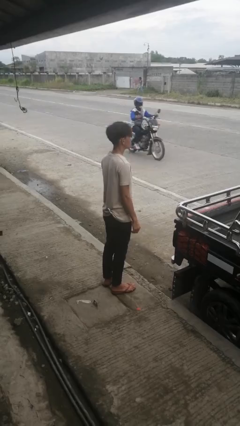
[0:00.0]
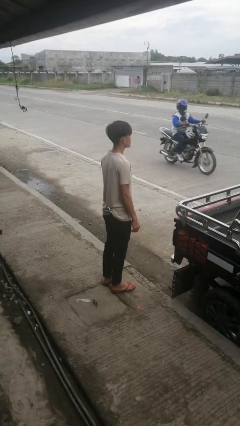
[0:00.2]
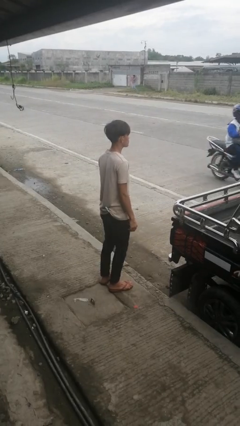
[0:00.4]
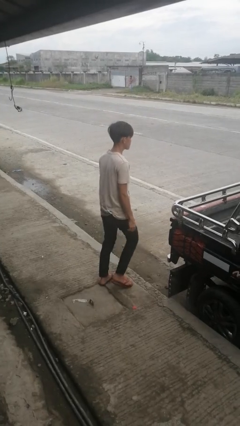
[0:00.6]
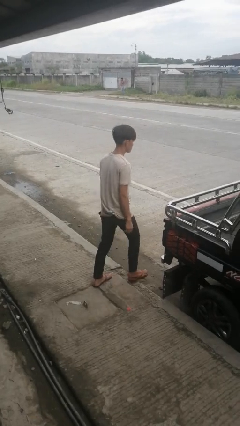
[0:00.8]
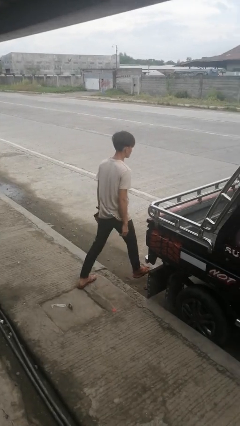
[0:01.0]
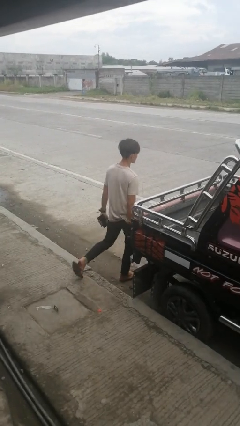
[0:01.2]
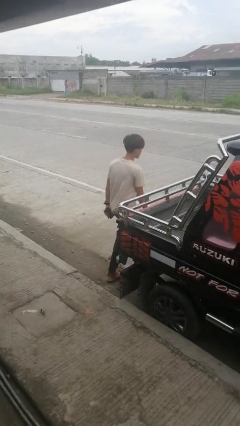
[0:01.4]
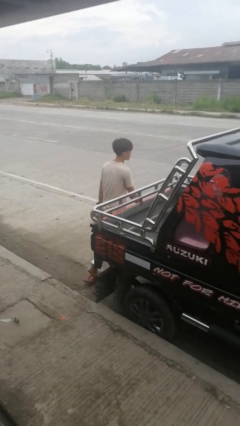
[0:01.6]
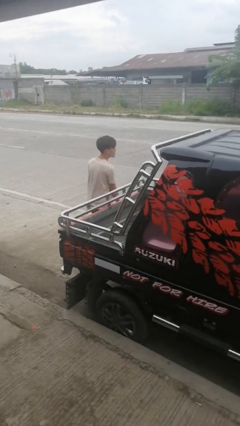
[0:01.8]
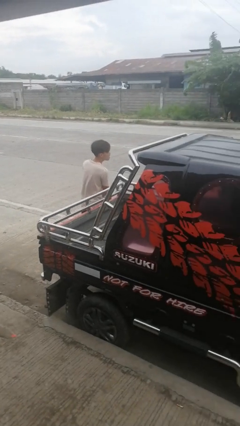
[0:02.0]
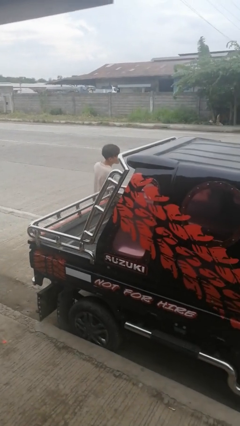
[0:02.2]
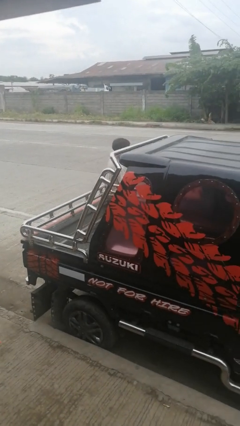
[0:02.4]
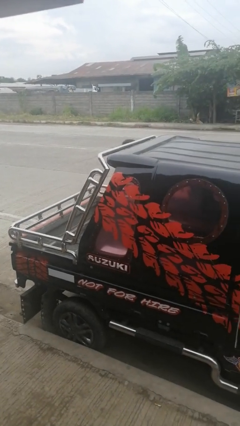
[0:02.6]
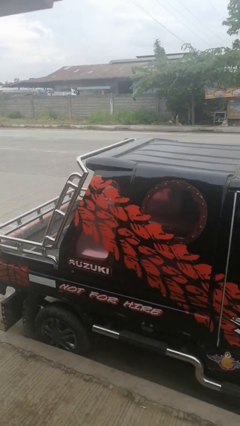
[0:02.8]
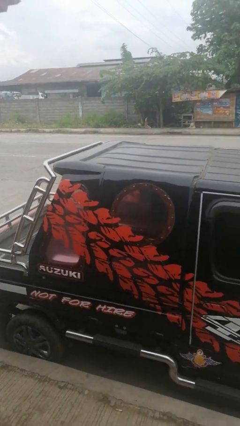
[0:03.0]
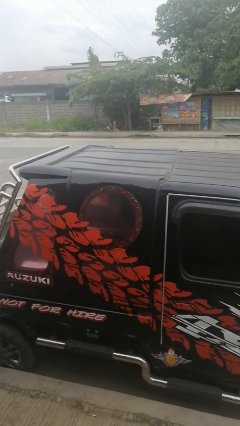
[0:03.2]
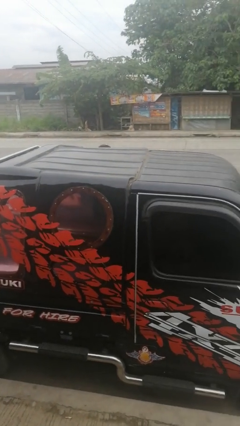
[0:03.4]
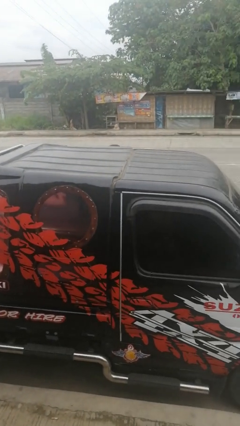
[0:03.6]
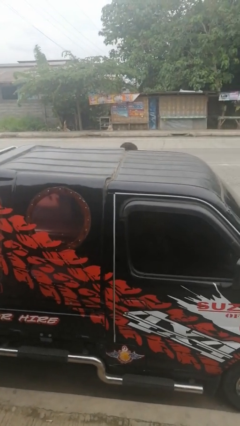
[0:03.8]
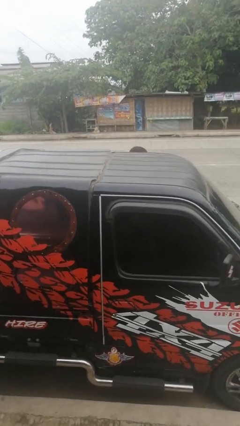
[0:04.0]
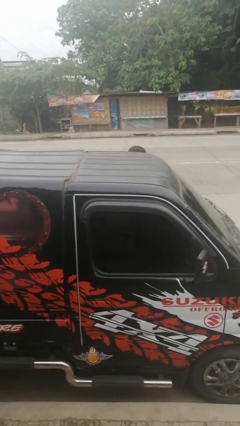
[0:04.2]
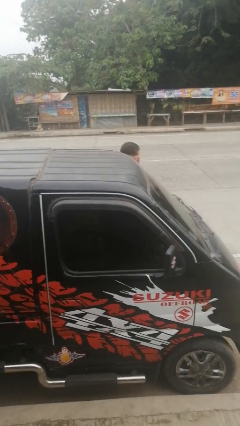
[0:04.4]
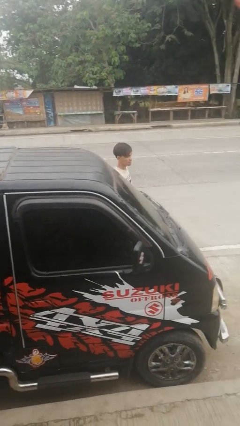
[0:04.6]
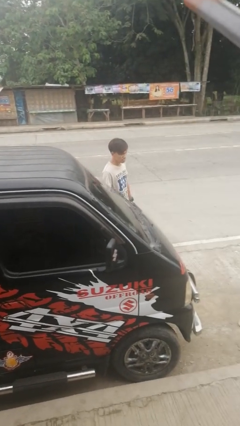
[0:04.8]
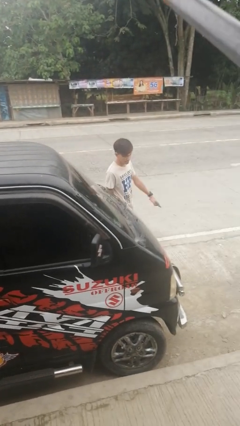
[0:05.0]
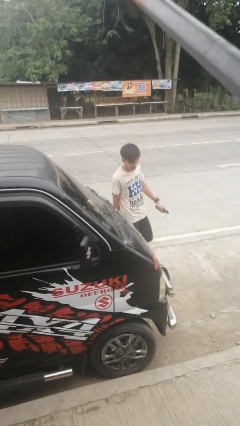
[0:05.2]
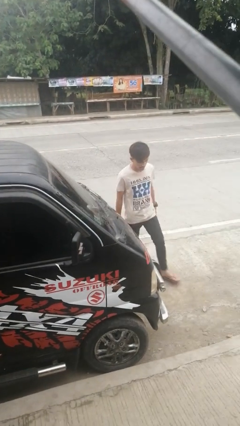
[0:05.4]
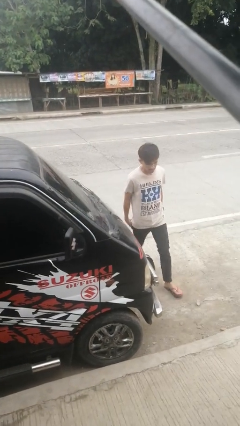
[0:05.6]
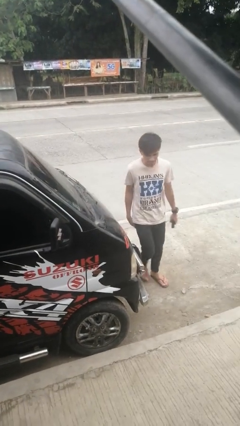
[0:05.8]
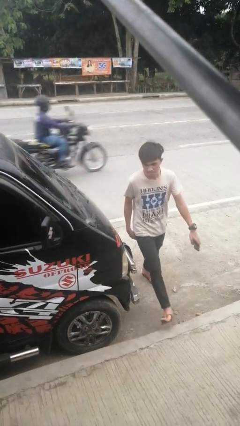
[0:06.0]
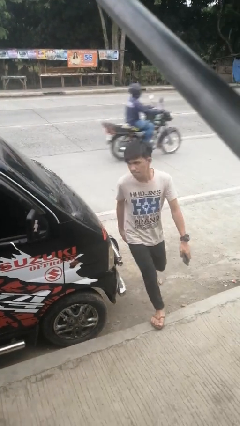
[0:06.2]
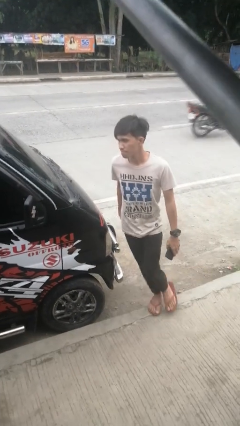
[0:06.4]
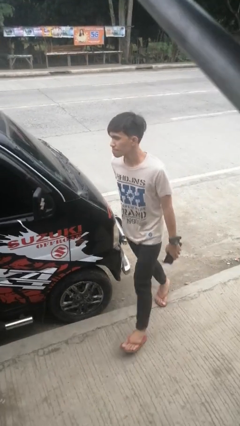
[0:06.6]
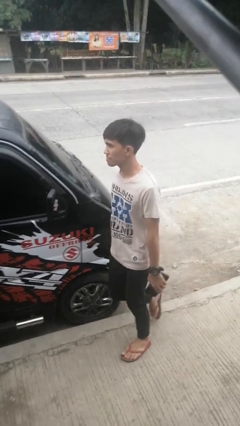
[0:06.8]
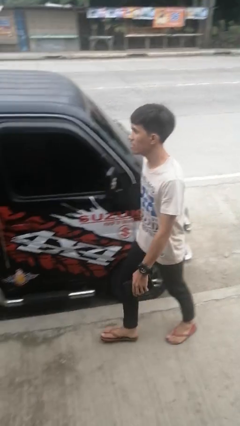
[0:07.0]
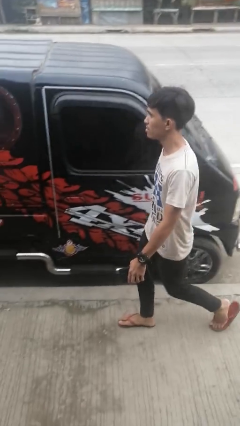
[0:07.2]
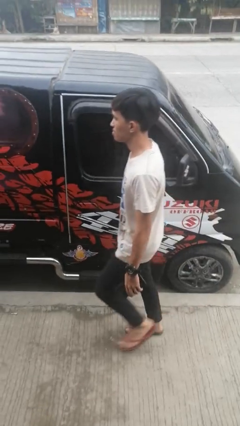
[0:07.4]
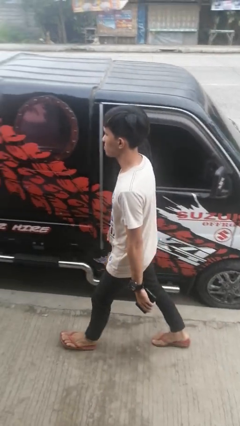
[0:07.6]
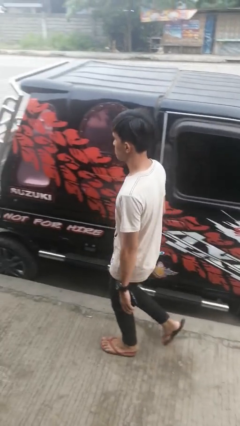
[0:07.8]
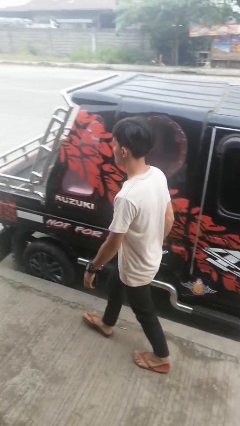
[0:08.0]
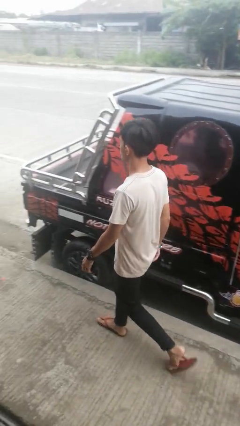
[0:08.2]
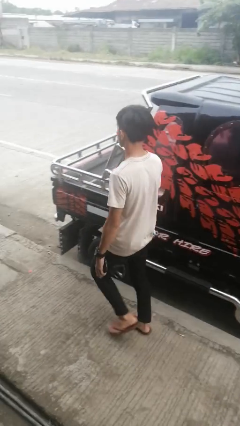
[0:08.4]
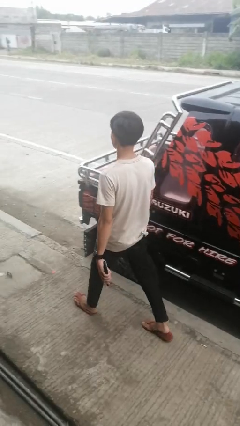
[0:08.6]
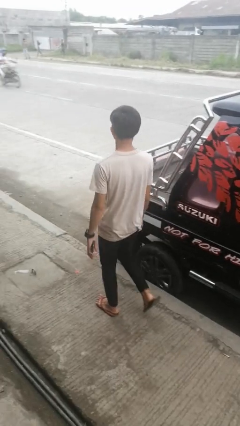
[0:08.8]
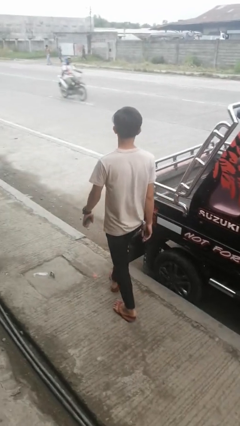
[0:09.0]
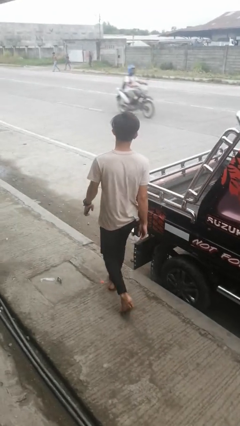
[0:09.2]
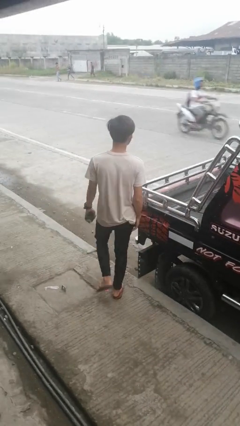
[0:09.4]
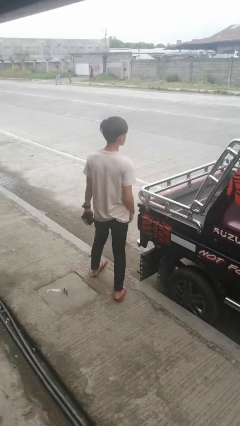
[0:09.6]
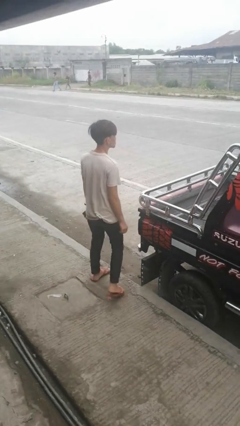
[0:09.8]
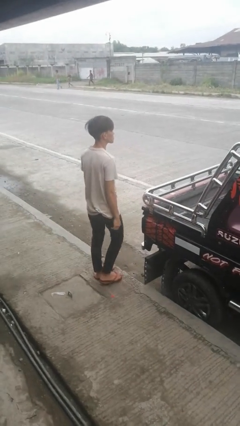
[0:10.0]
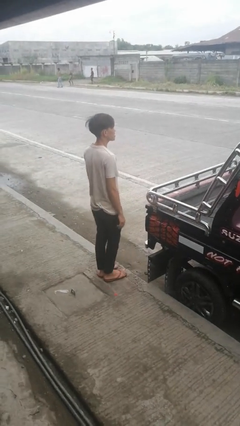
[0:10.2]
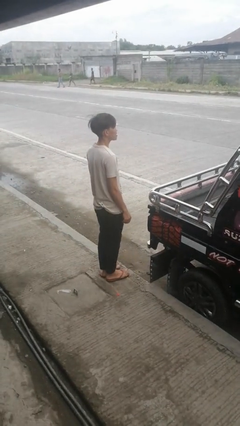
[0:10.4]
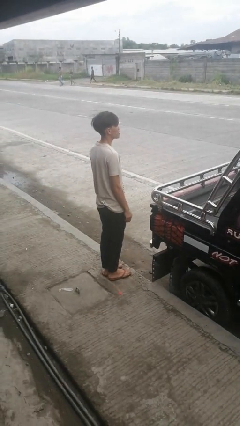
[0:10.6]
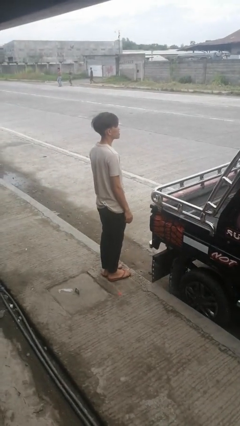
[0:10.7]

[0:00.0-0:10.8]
person walks around car

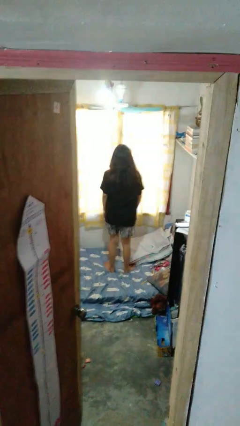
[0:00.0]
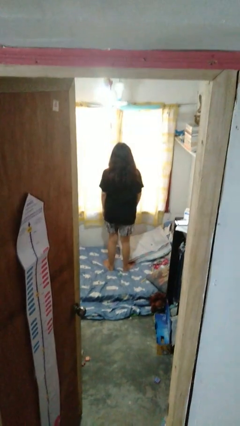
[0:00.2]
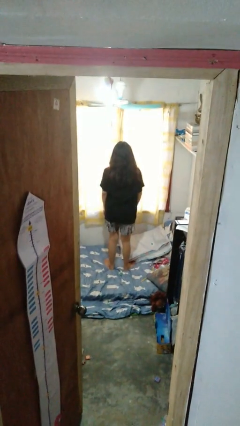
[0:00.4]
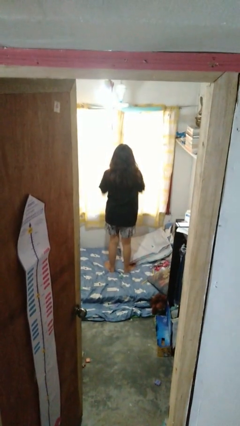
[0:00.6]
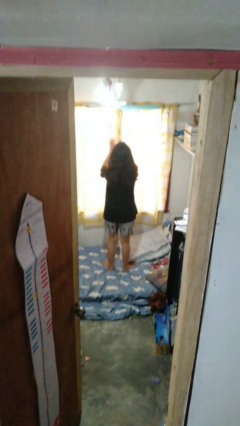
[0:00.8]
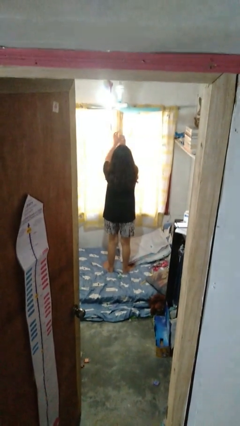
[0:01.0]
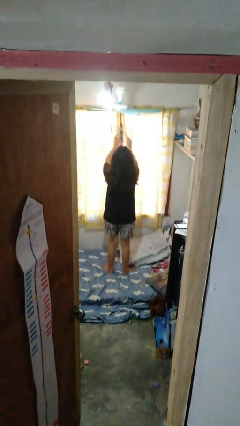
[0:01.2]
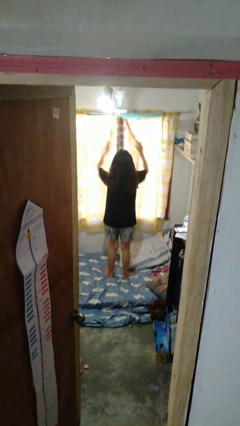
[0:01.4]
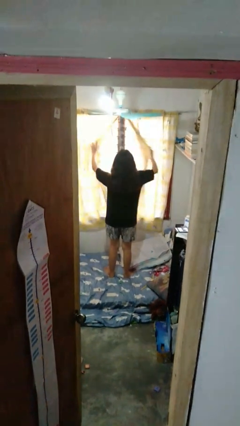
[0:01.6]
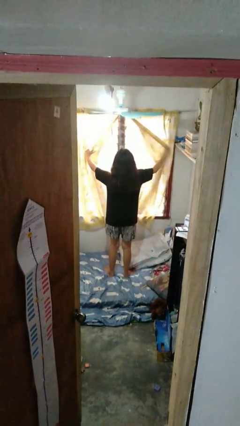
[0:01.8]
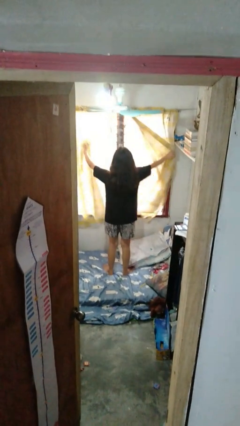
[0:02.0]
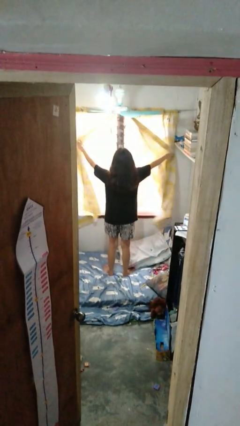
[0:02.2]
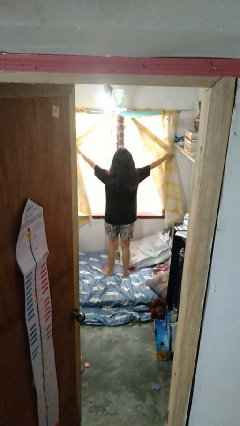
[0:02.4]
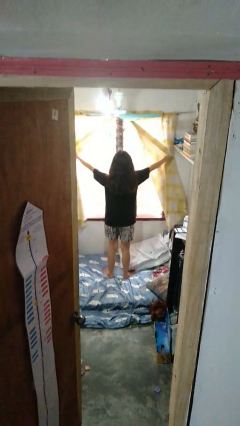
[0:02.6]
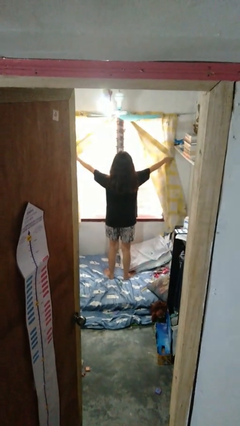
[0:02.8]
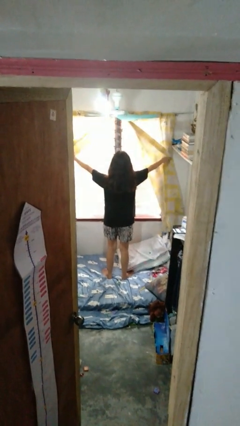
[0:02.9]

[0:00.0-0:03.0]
person opens curtains

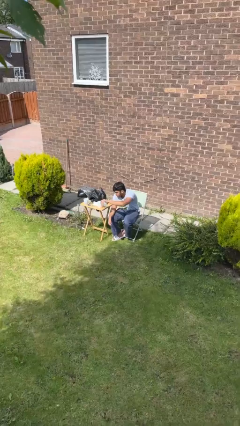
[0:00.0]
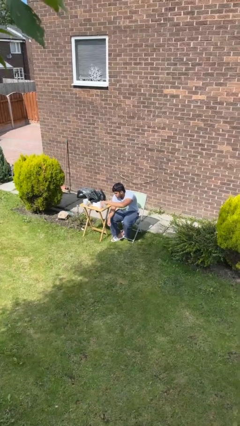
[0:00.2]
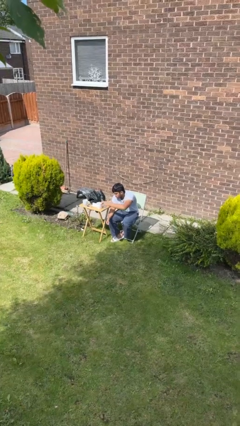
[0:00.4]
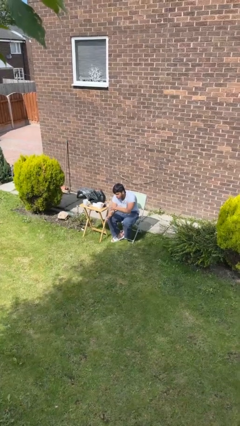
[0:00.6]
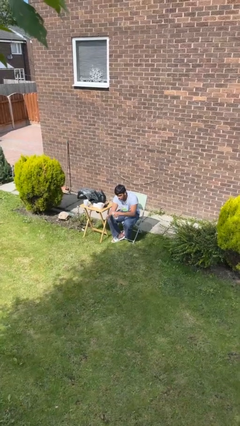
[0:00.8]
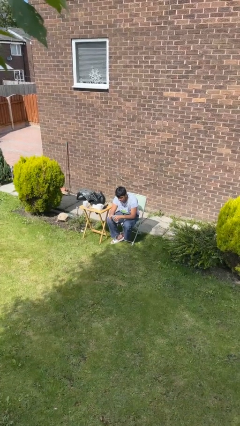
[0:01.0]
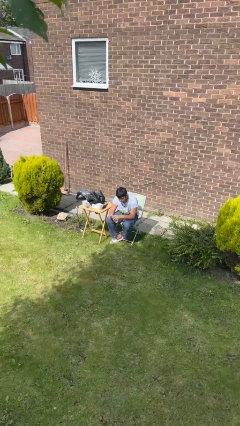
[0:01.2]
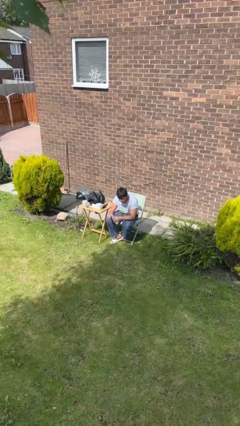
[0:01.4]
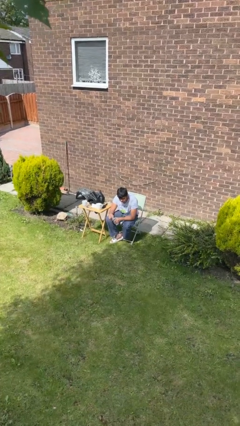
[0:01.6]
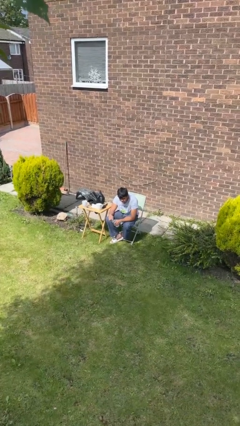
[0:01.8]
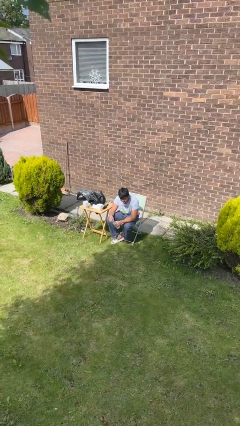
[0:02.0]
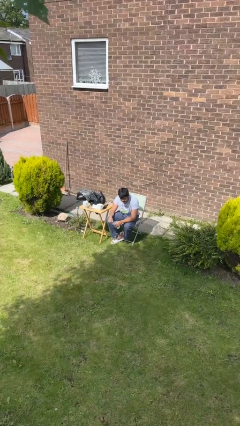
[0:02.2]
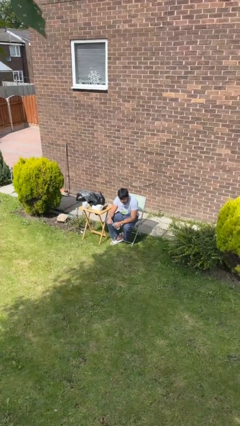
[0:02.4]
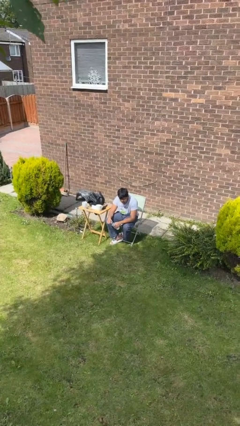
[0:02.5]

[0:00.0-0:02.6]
person screws lid to bottle

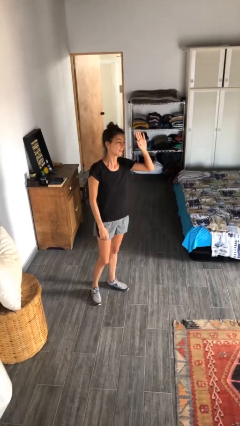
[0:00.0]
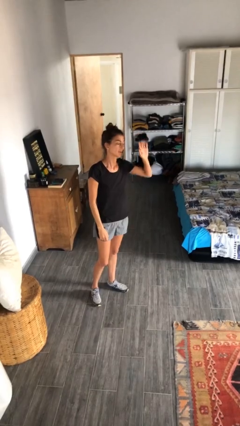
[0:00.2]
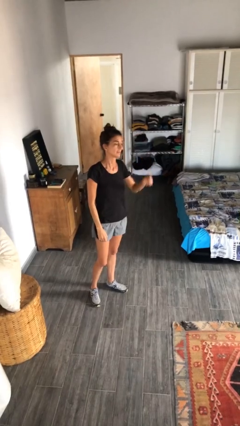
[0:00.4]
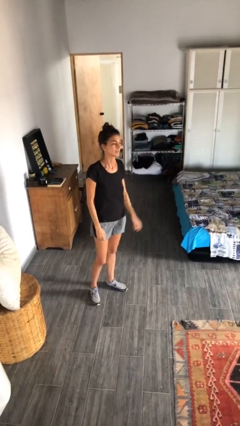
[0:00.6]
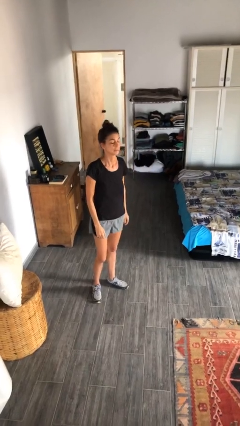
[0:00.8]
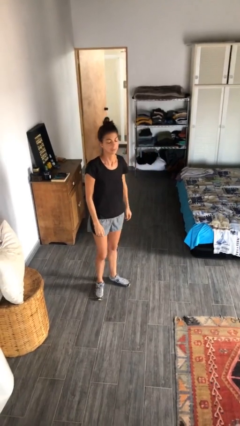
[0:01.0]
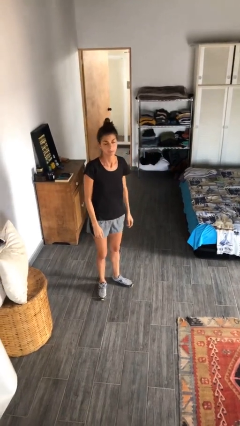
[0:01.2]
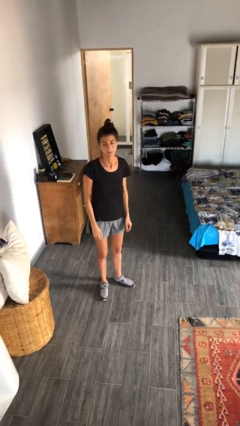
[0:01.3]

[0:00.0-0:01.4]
person gestures lower hand
